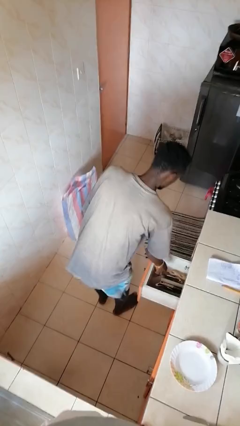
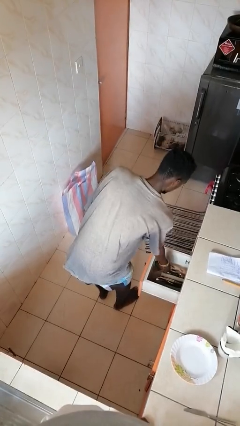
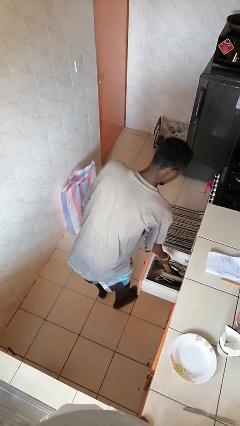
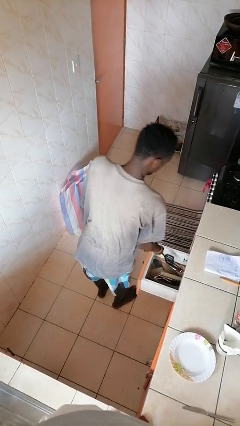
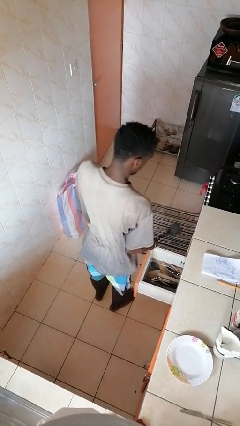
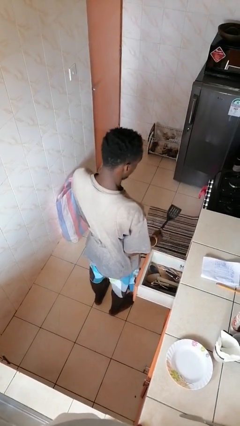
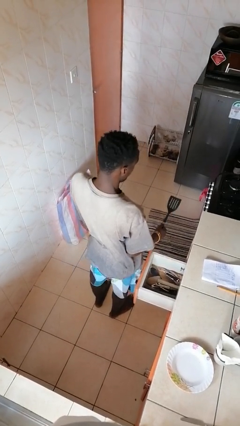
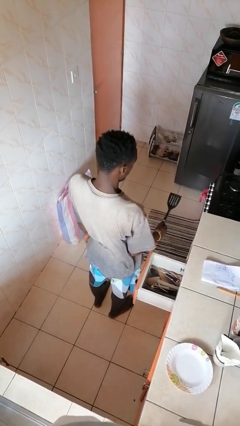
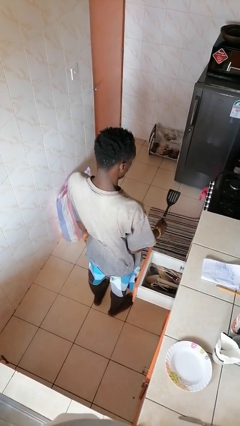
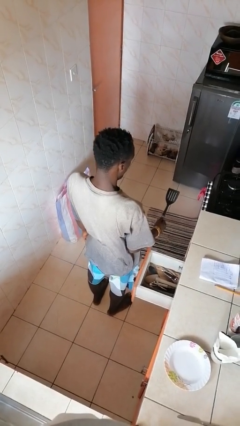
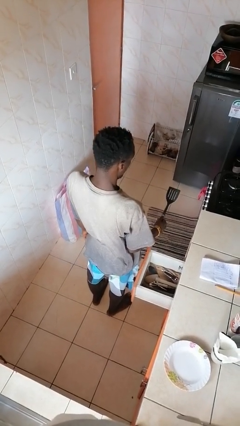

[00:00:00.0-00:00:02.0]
person takes object from kitchen drawer

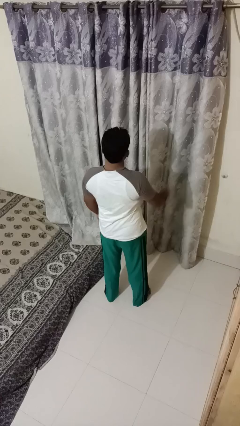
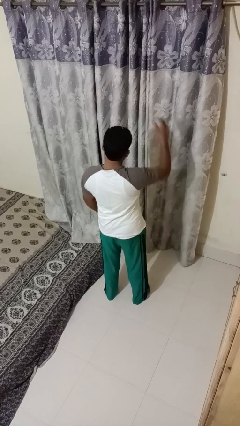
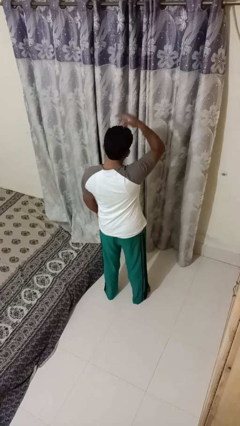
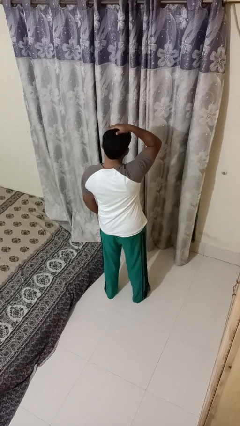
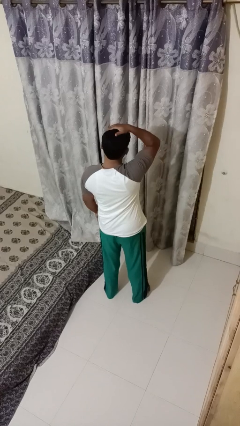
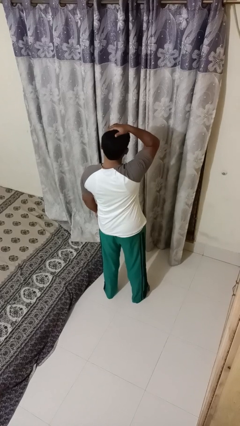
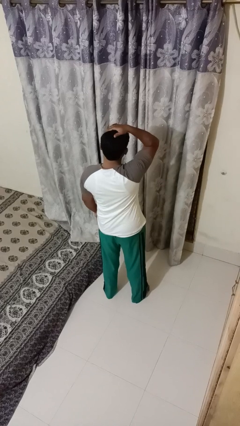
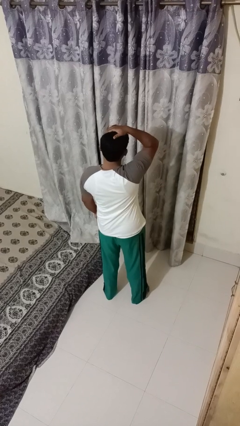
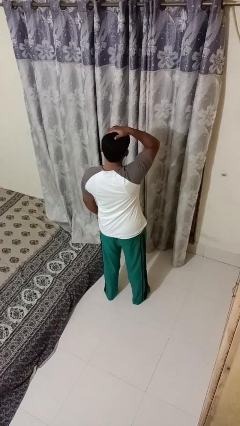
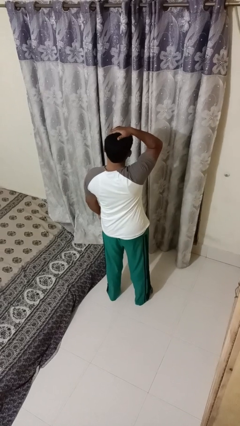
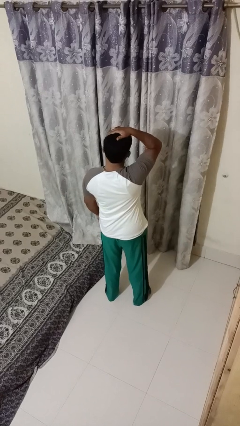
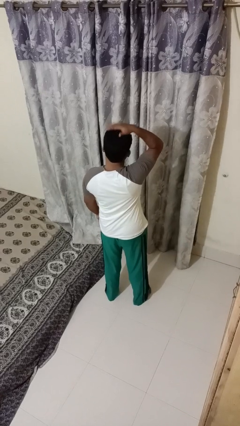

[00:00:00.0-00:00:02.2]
person pats head

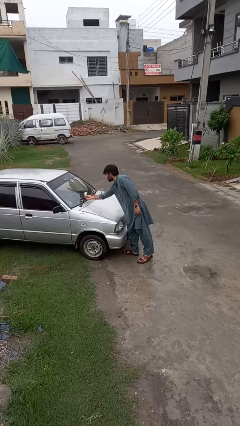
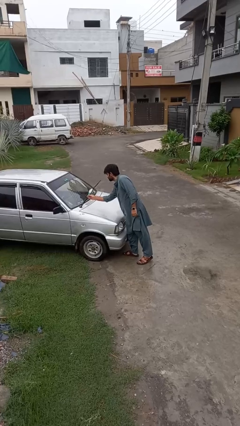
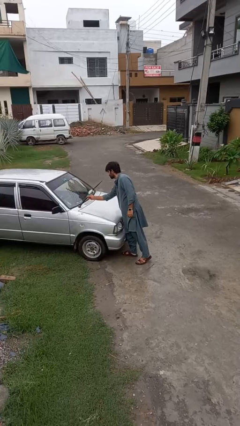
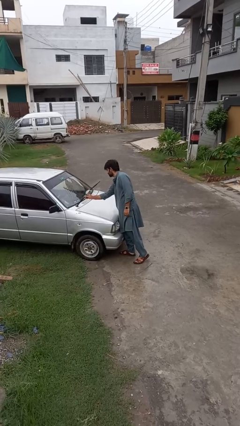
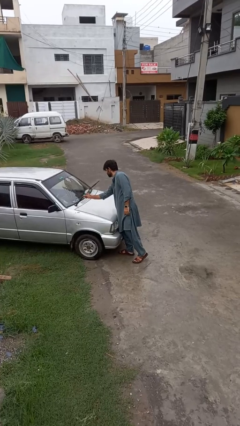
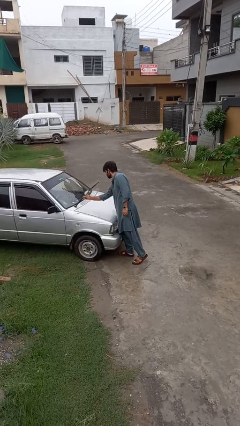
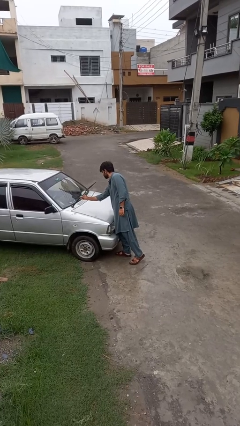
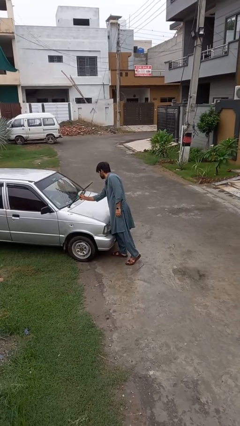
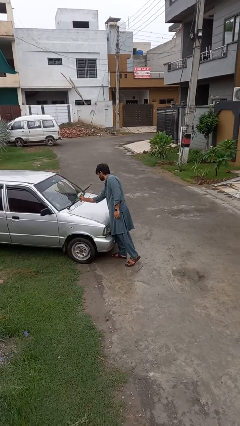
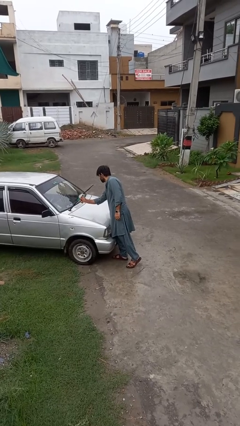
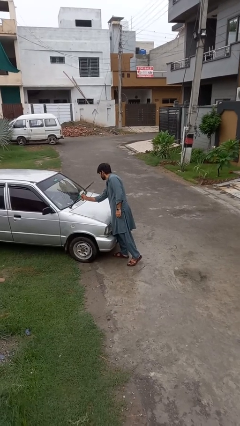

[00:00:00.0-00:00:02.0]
person flips up car wipers

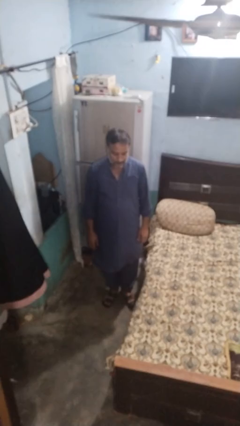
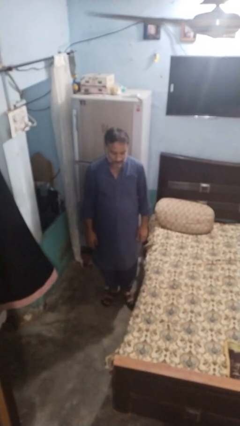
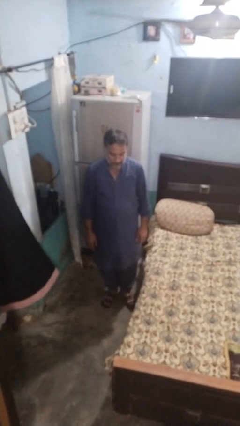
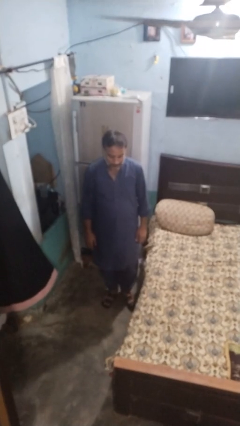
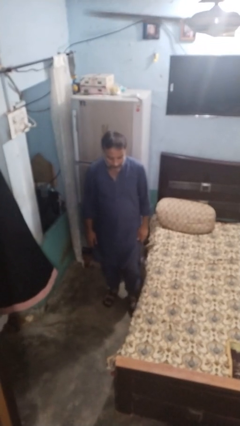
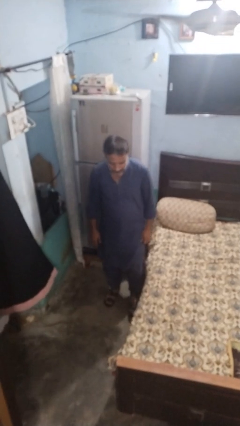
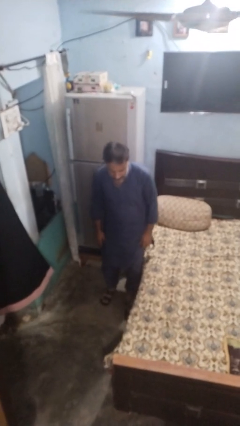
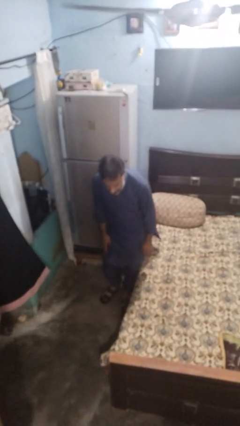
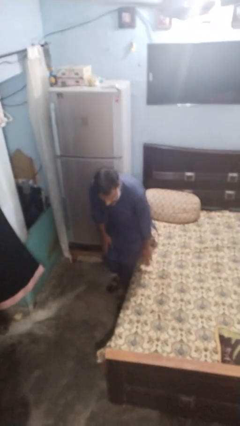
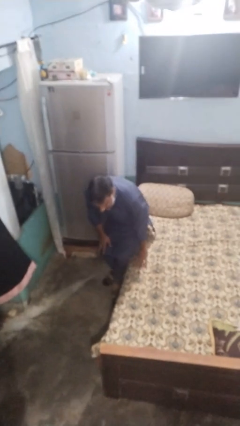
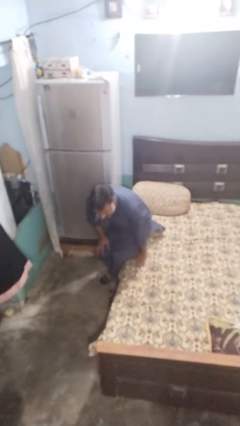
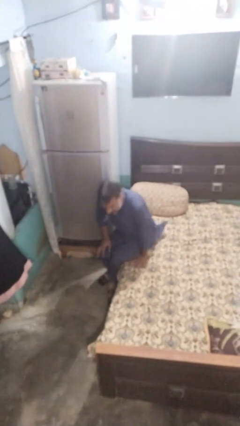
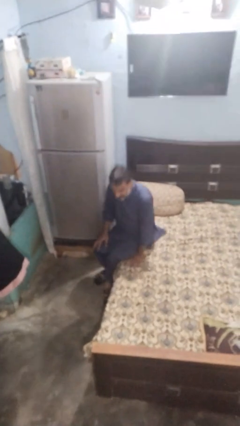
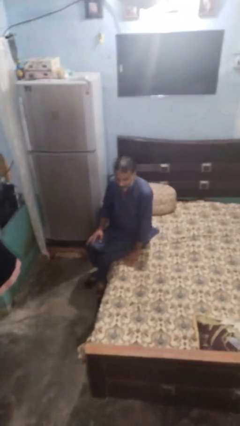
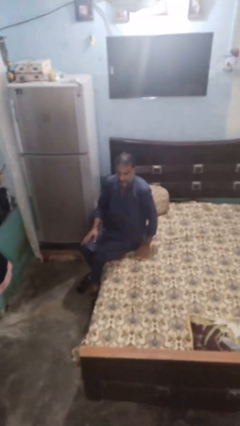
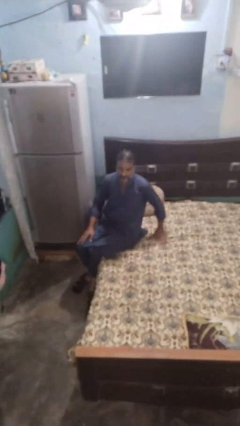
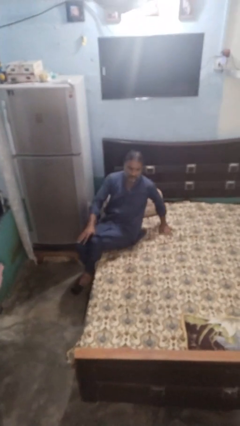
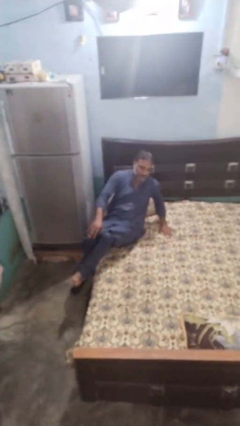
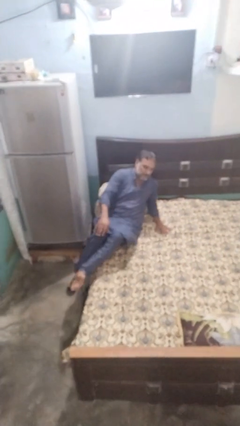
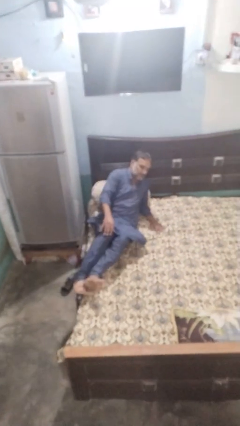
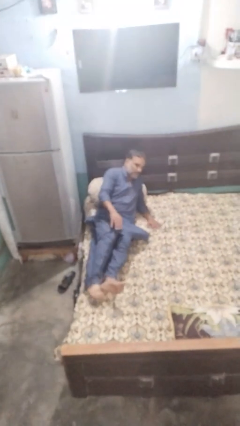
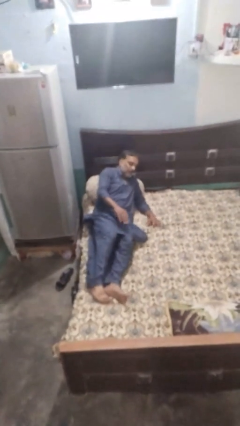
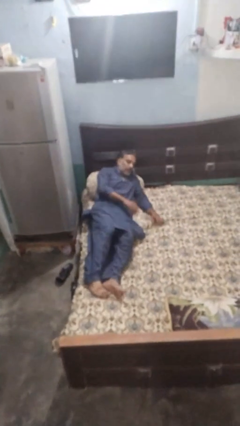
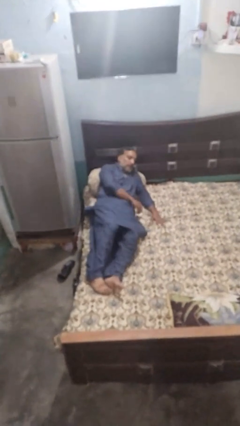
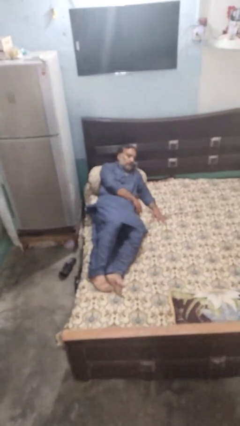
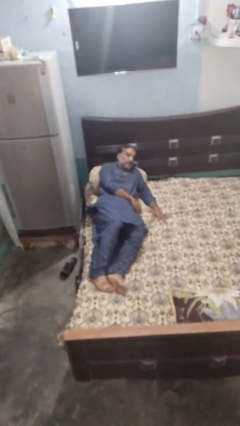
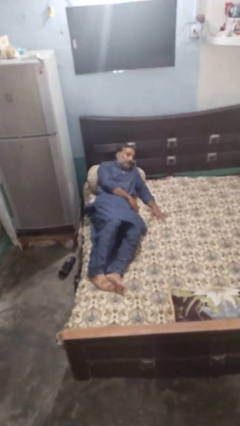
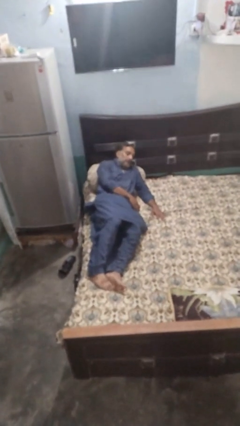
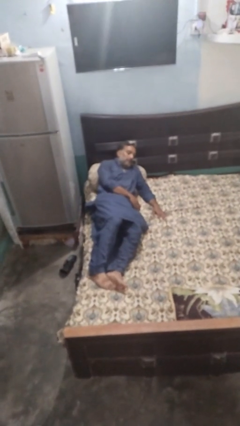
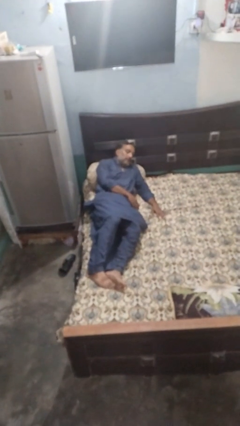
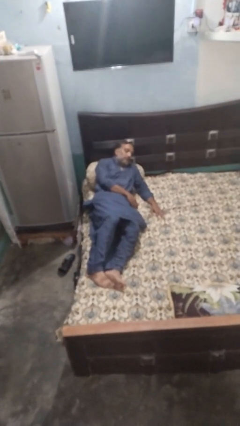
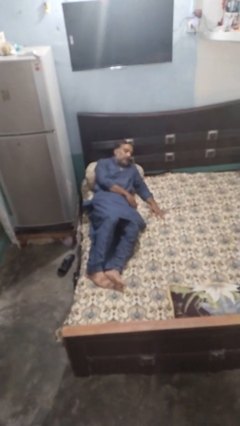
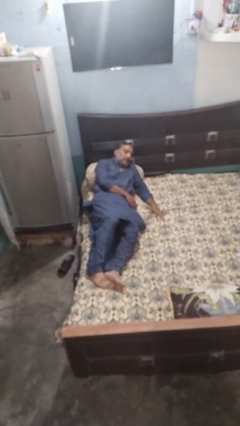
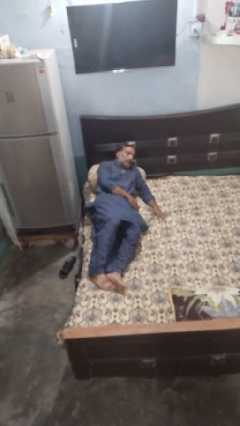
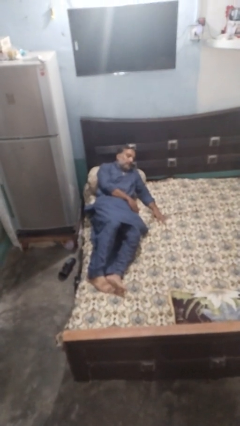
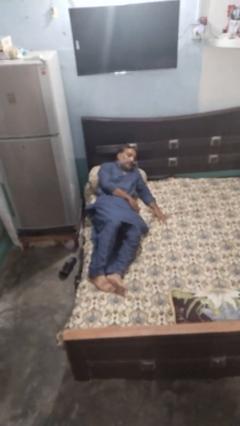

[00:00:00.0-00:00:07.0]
person lies down on bed

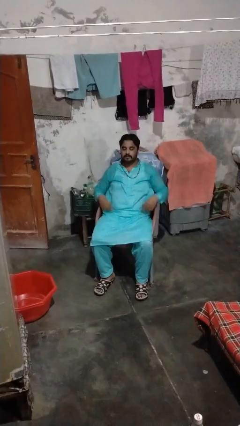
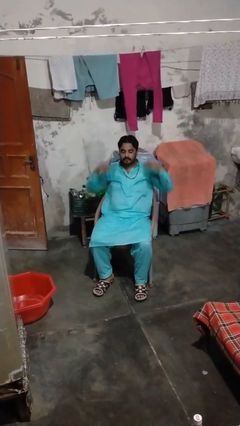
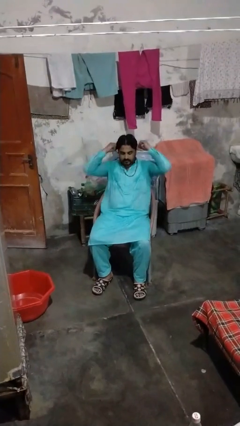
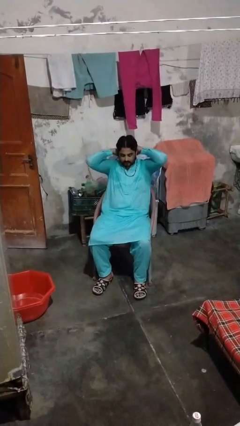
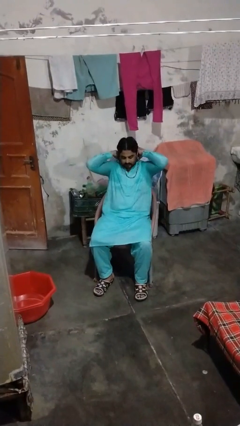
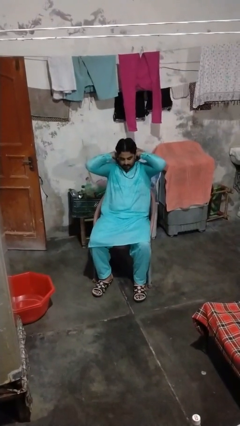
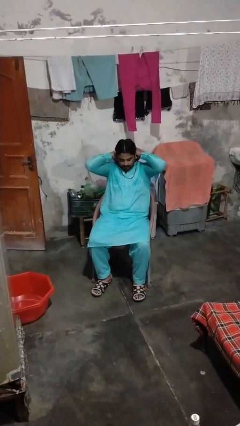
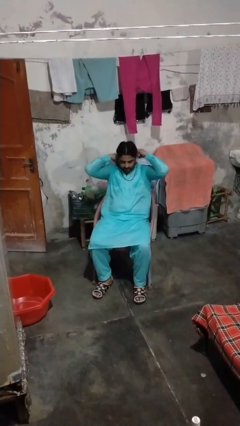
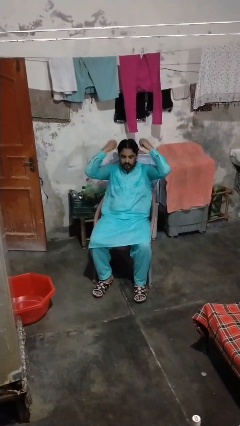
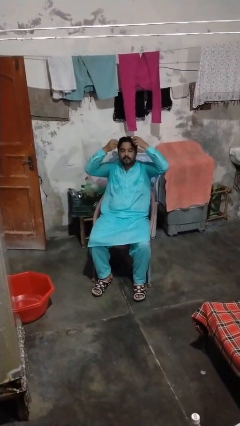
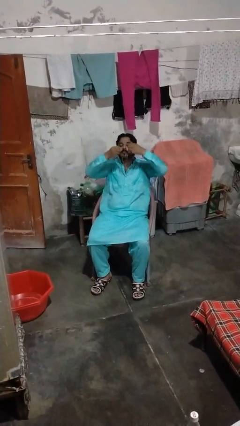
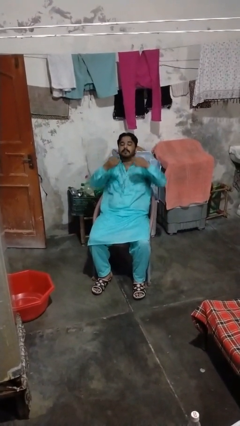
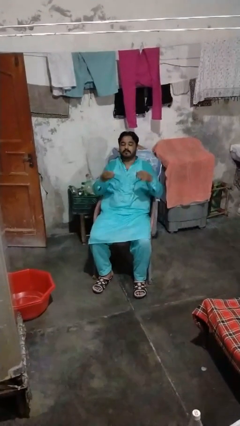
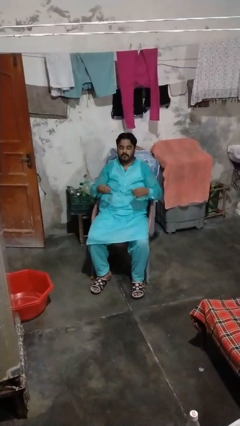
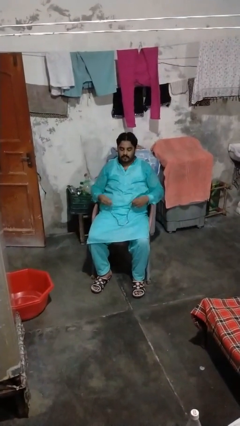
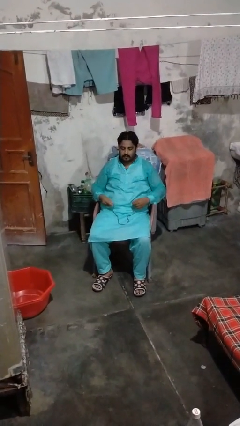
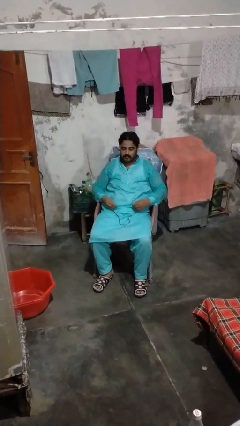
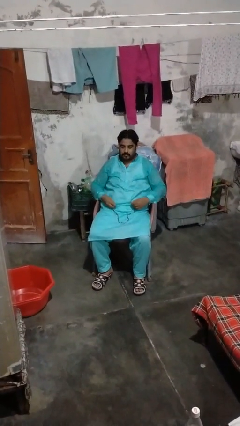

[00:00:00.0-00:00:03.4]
person takes off necklace

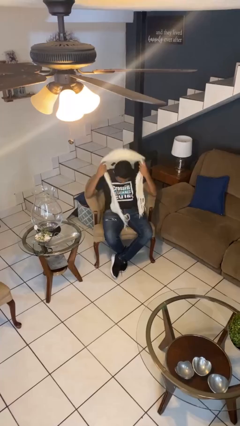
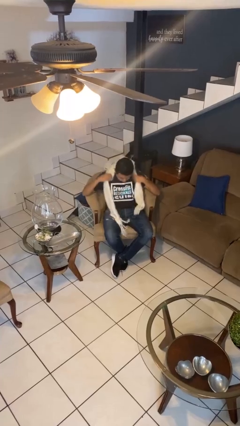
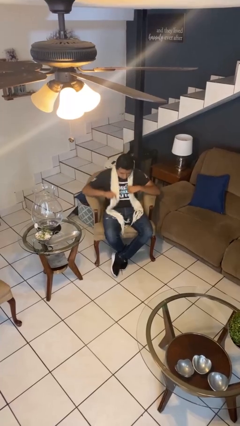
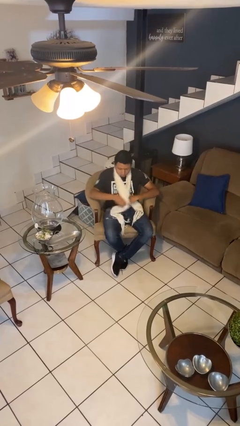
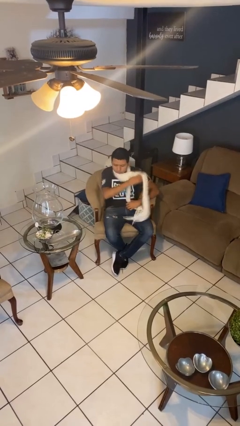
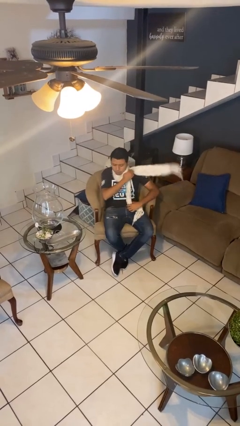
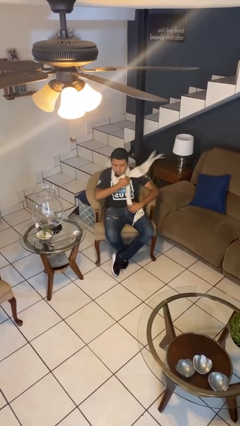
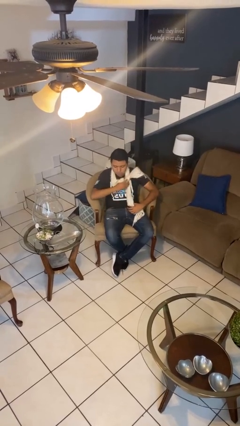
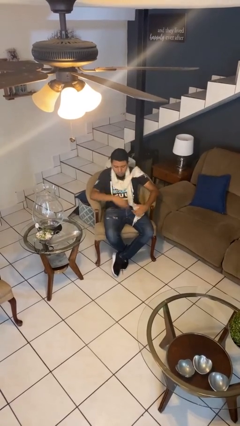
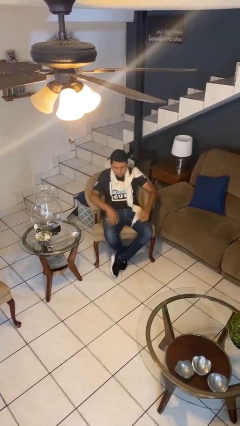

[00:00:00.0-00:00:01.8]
person puts on scarf
